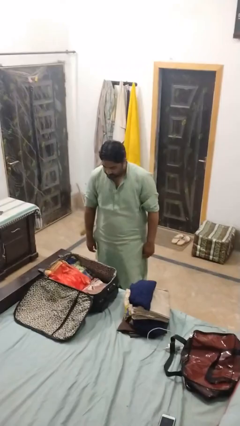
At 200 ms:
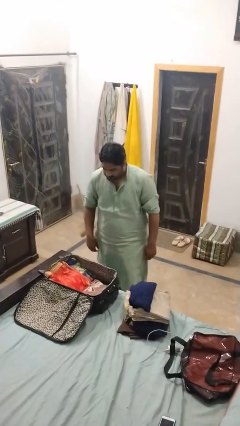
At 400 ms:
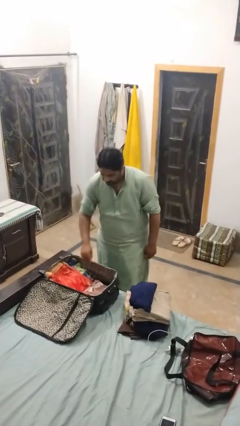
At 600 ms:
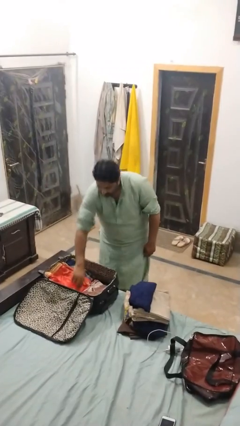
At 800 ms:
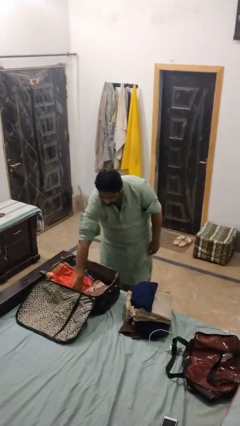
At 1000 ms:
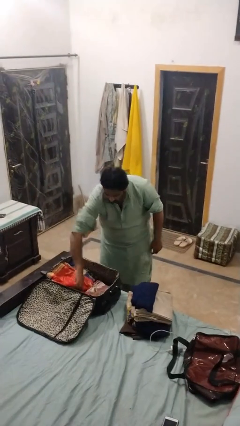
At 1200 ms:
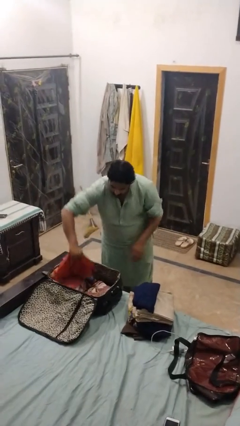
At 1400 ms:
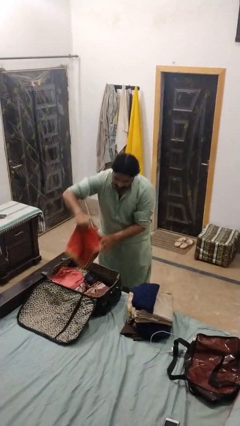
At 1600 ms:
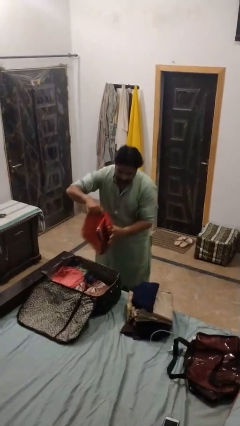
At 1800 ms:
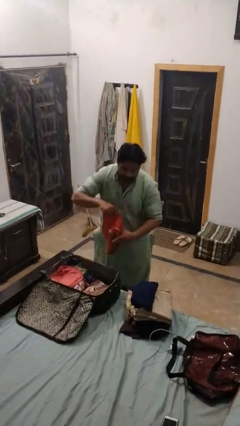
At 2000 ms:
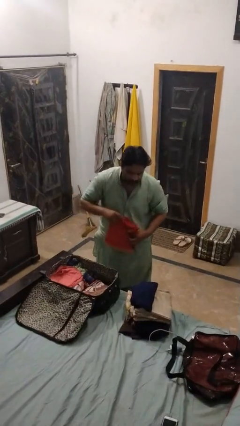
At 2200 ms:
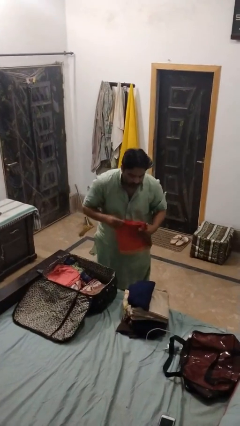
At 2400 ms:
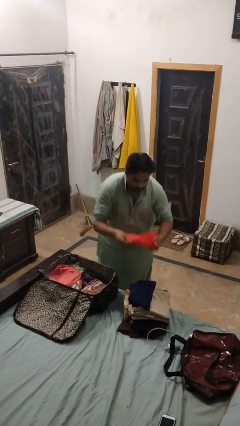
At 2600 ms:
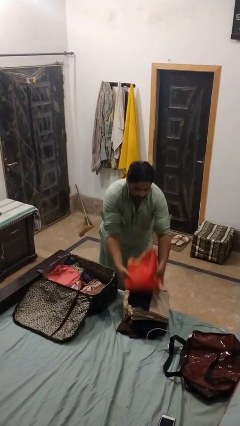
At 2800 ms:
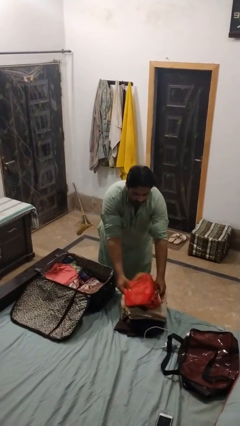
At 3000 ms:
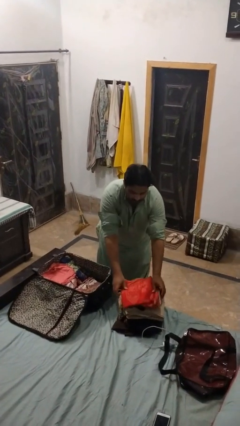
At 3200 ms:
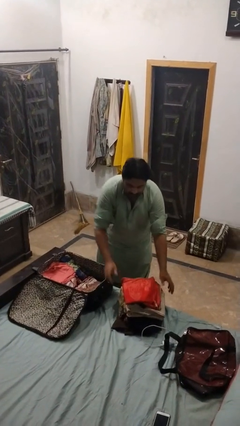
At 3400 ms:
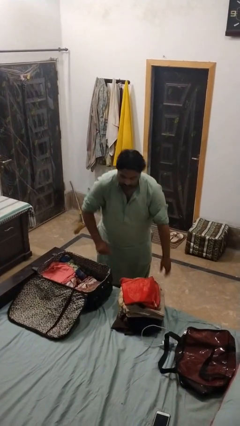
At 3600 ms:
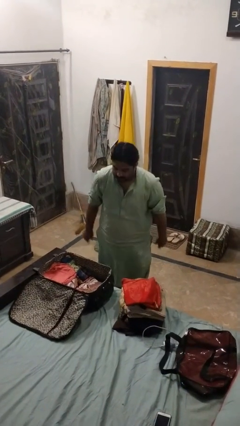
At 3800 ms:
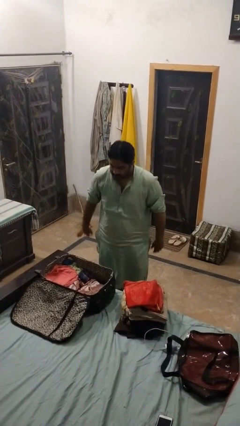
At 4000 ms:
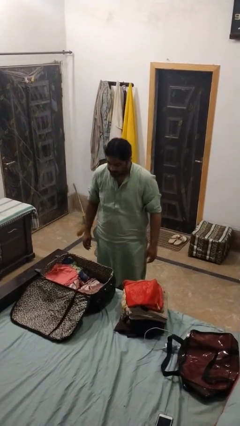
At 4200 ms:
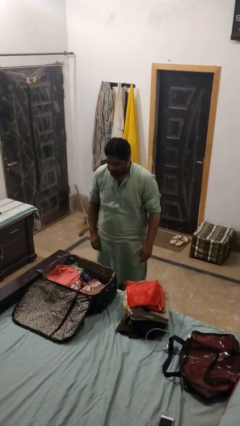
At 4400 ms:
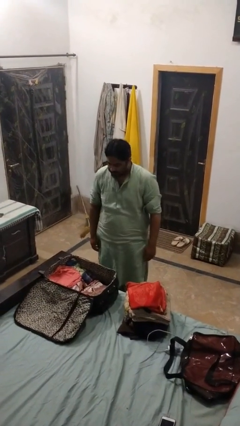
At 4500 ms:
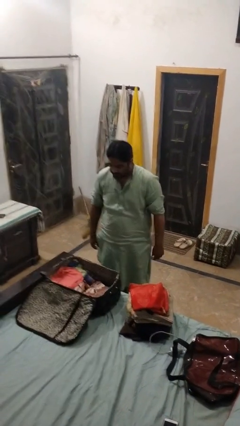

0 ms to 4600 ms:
person unloads clothes from suitcase

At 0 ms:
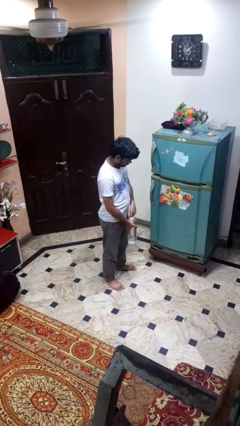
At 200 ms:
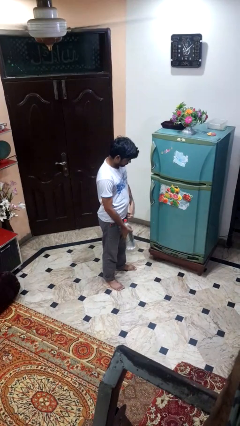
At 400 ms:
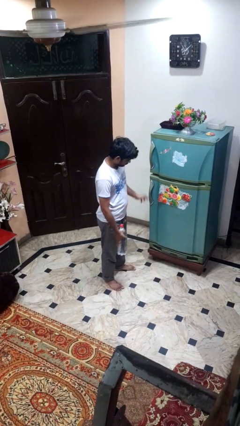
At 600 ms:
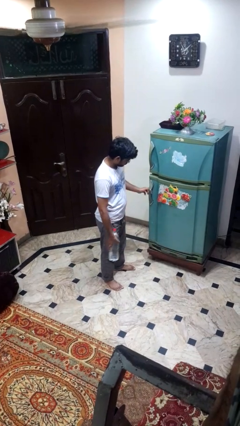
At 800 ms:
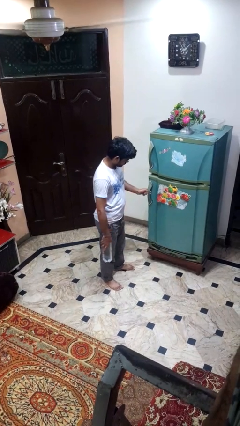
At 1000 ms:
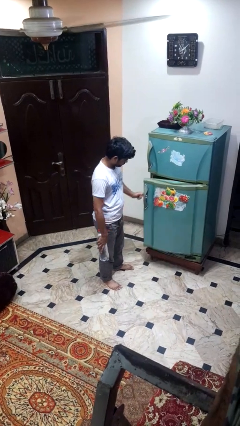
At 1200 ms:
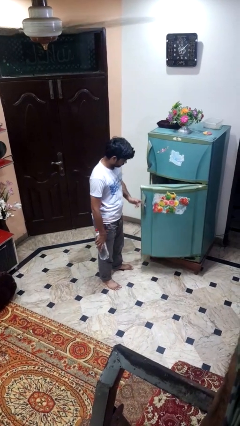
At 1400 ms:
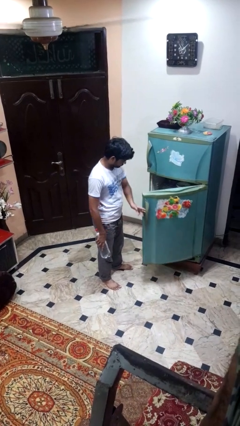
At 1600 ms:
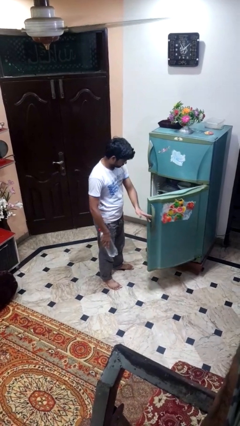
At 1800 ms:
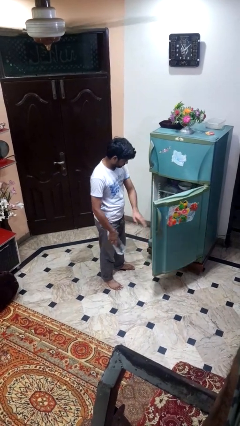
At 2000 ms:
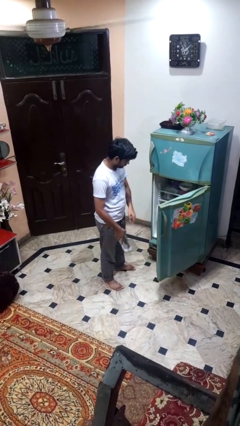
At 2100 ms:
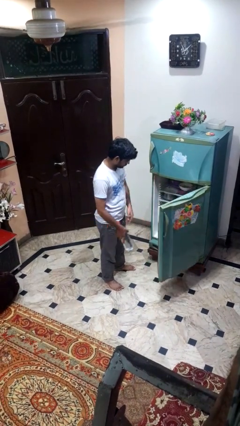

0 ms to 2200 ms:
person opens refrigerator

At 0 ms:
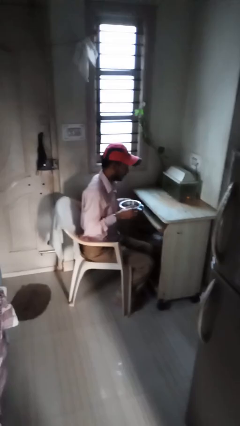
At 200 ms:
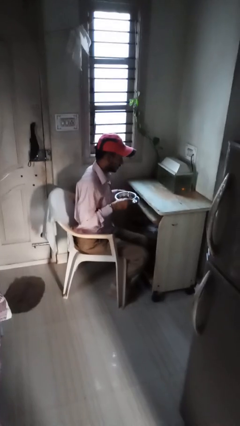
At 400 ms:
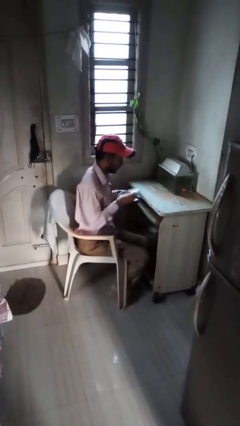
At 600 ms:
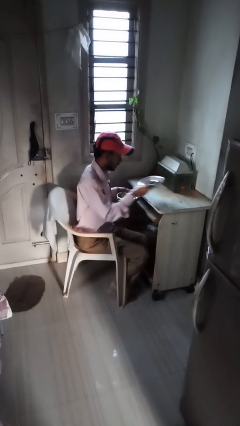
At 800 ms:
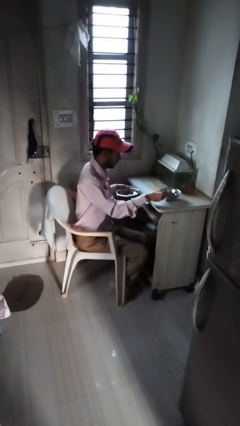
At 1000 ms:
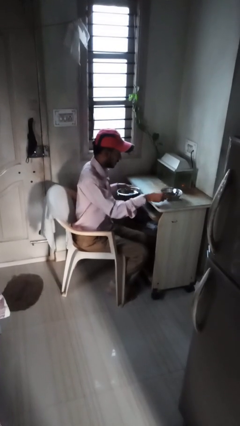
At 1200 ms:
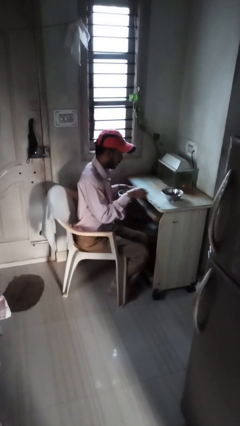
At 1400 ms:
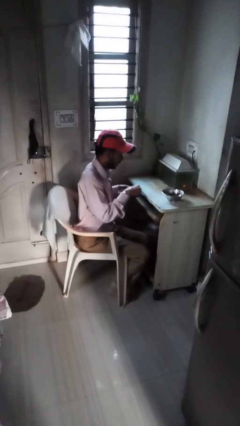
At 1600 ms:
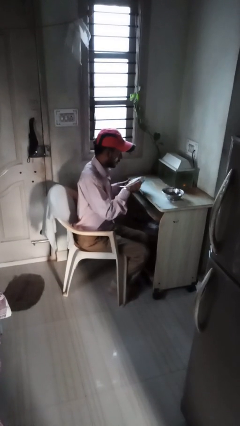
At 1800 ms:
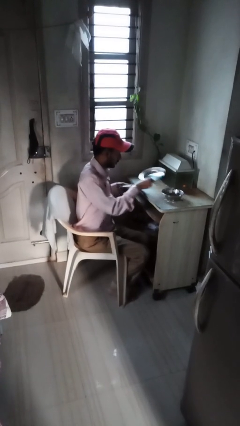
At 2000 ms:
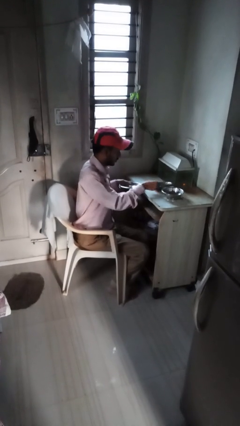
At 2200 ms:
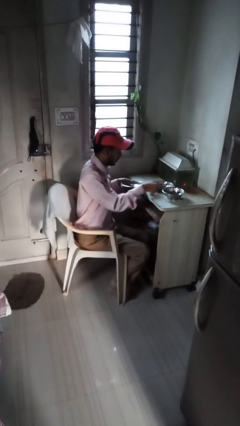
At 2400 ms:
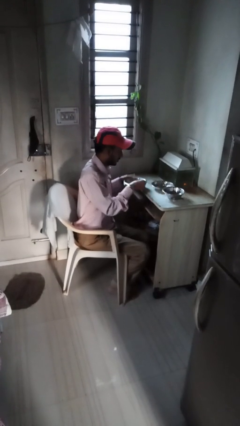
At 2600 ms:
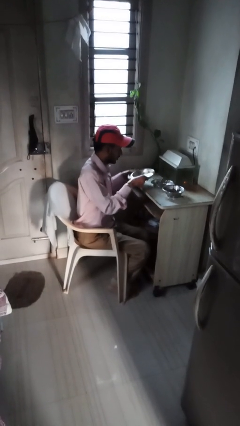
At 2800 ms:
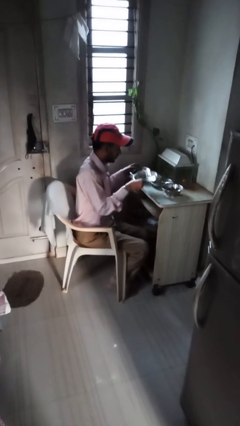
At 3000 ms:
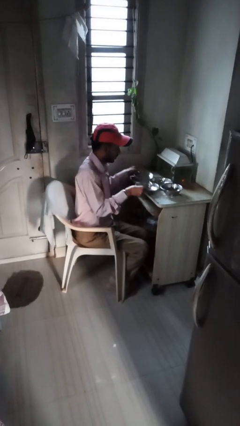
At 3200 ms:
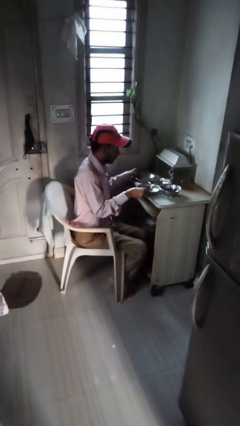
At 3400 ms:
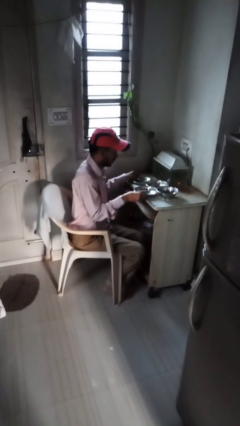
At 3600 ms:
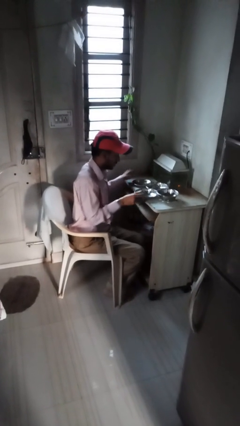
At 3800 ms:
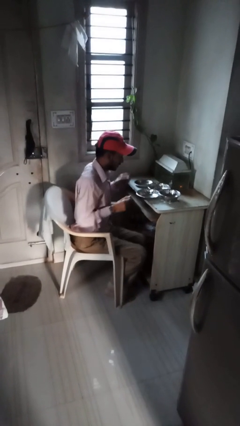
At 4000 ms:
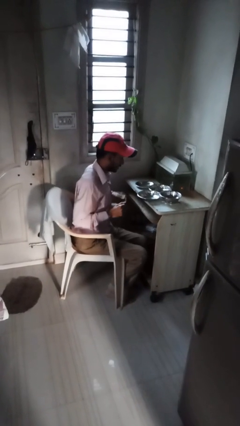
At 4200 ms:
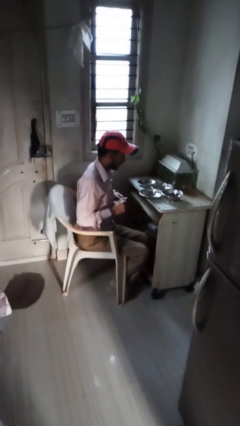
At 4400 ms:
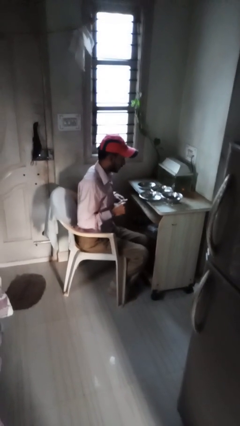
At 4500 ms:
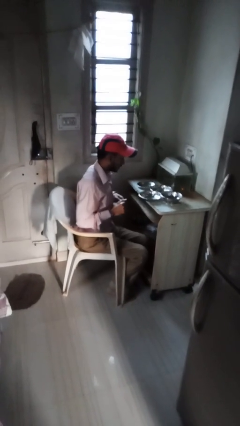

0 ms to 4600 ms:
person sets table

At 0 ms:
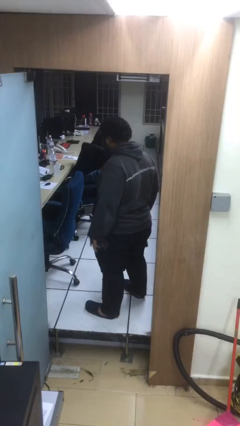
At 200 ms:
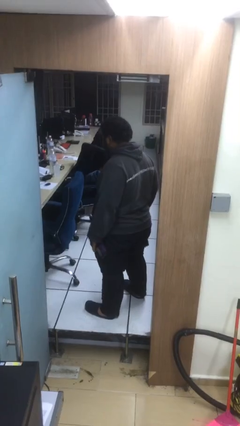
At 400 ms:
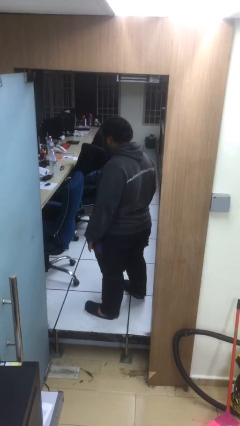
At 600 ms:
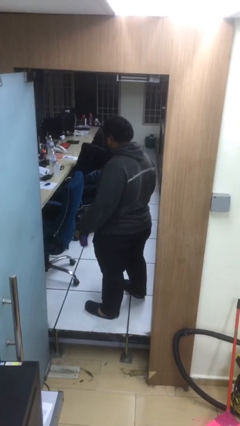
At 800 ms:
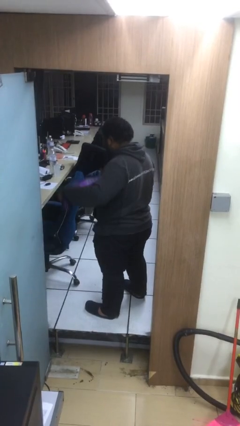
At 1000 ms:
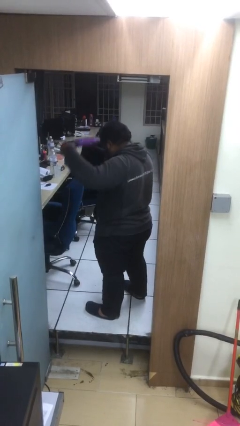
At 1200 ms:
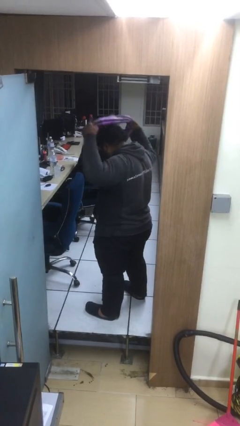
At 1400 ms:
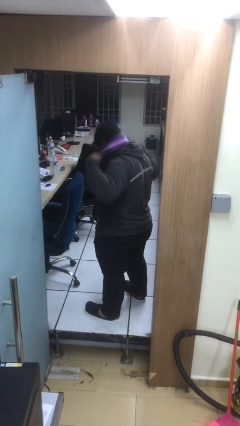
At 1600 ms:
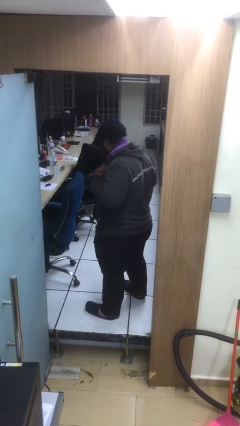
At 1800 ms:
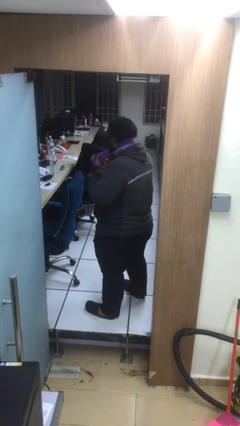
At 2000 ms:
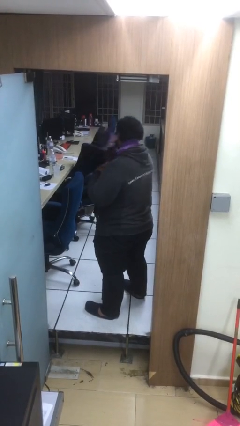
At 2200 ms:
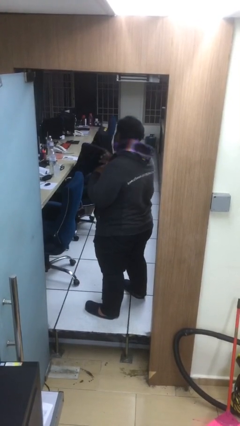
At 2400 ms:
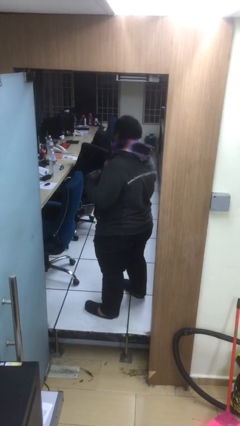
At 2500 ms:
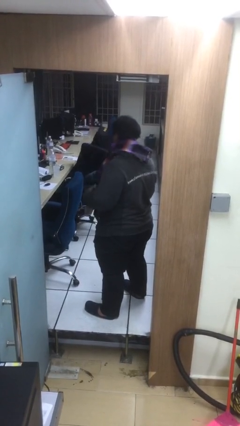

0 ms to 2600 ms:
person puts on scarf

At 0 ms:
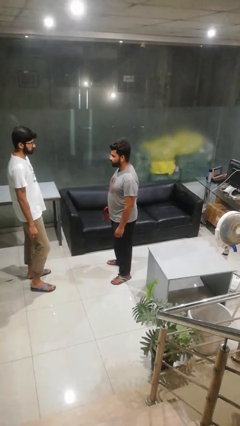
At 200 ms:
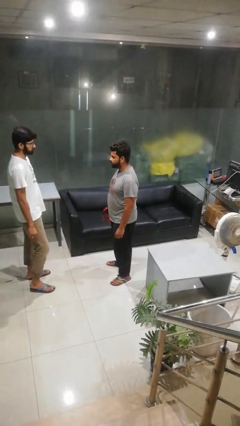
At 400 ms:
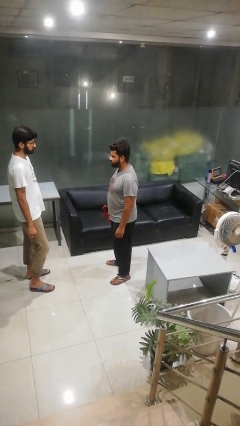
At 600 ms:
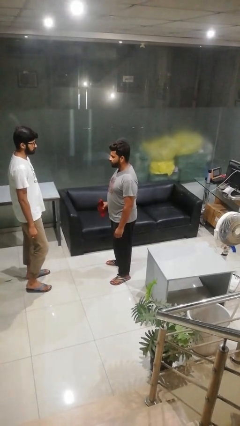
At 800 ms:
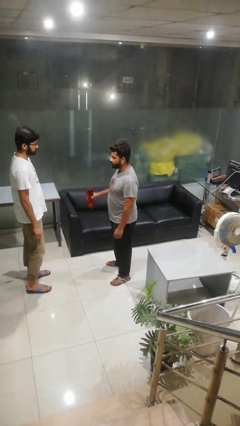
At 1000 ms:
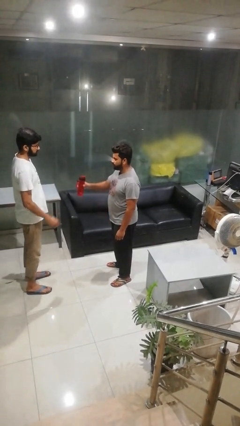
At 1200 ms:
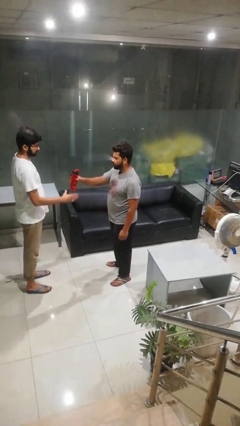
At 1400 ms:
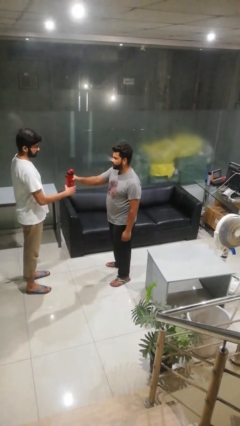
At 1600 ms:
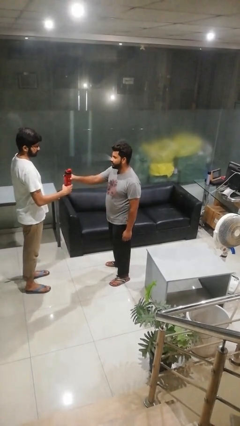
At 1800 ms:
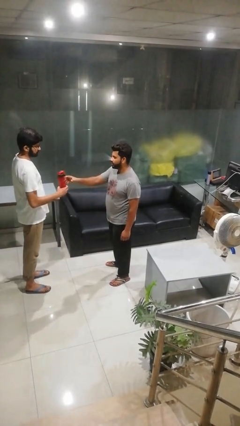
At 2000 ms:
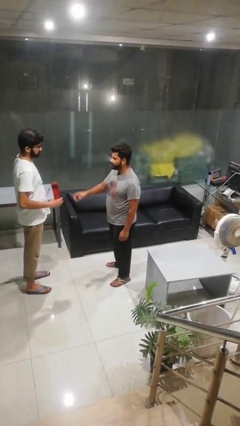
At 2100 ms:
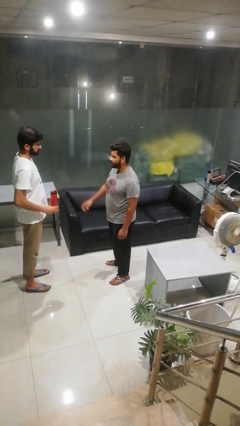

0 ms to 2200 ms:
person transfers object to person

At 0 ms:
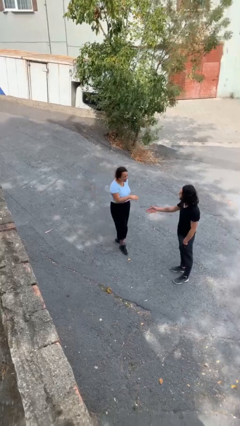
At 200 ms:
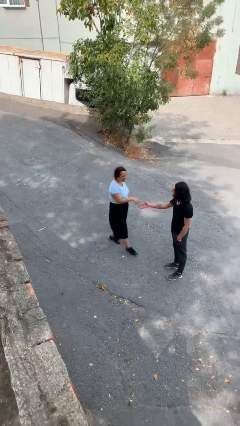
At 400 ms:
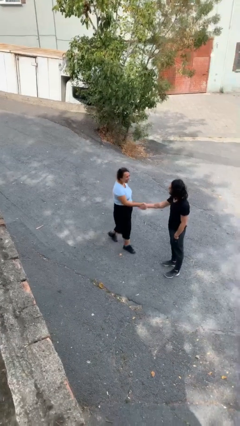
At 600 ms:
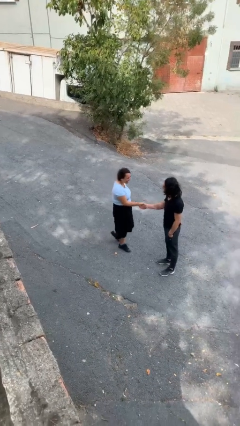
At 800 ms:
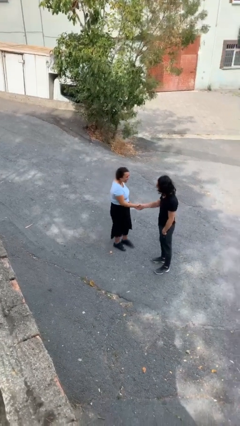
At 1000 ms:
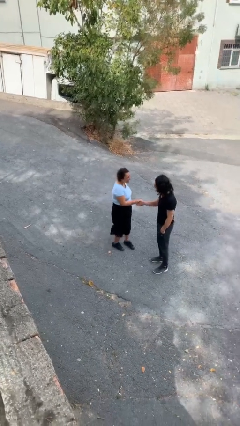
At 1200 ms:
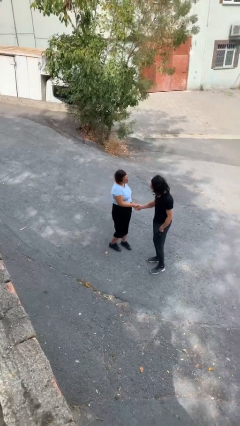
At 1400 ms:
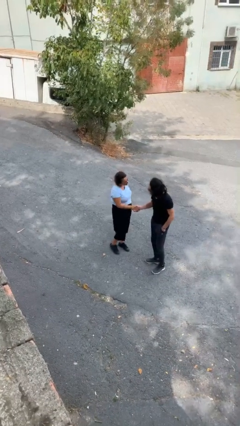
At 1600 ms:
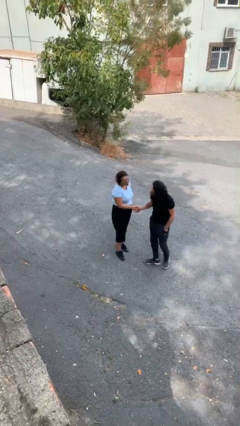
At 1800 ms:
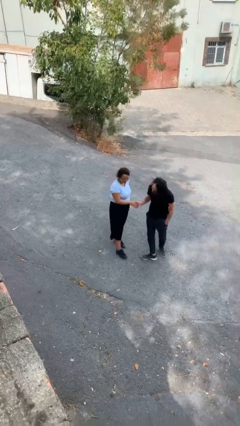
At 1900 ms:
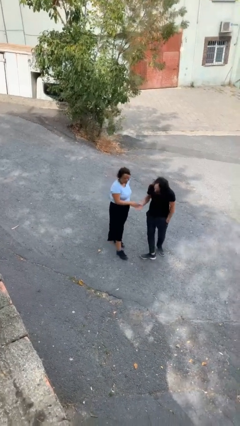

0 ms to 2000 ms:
person shakes hand
